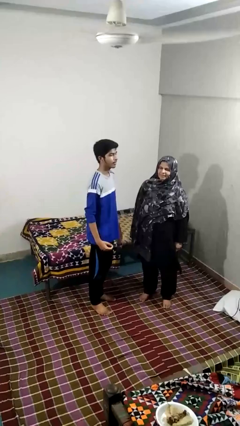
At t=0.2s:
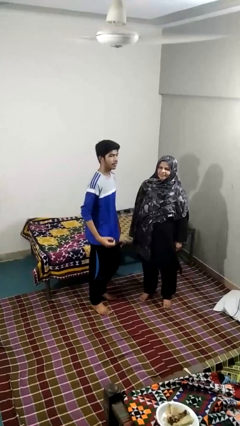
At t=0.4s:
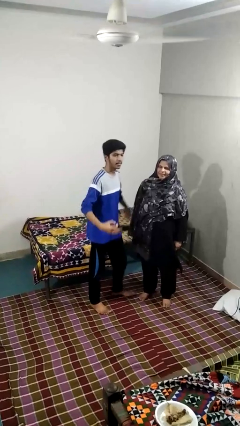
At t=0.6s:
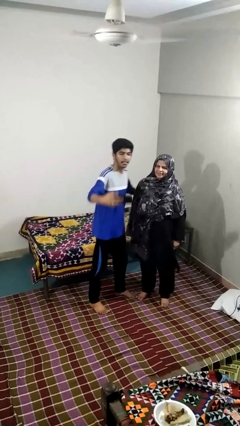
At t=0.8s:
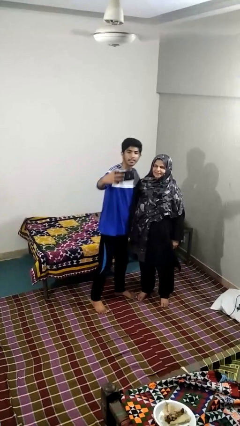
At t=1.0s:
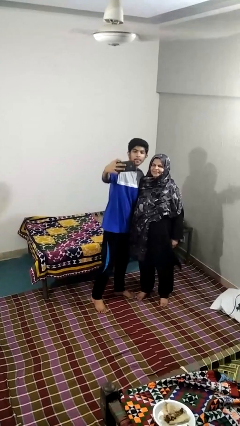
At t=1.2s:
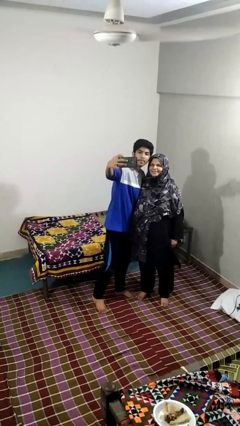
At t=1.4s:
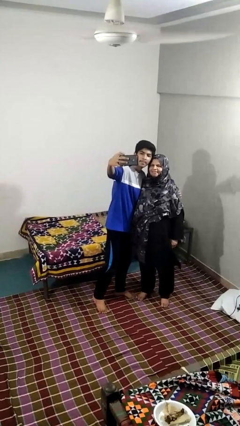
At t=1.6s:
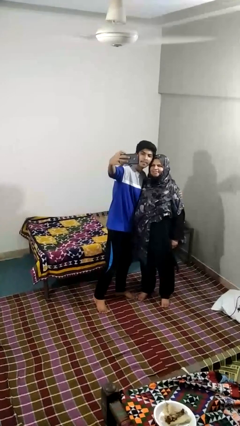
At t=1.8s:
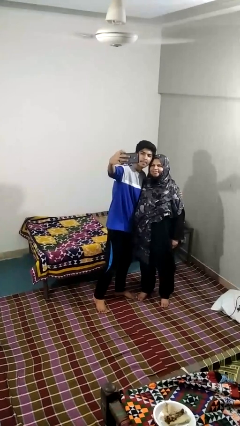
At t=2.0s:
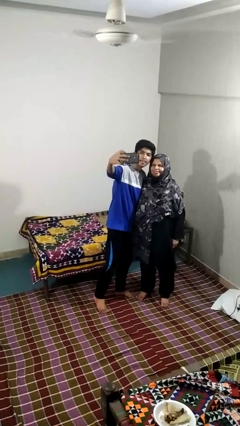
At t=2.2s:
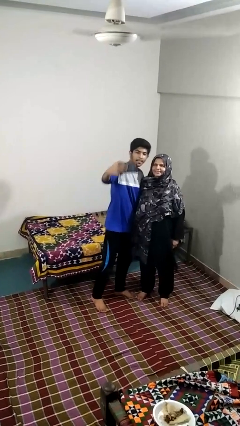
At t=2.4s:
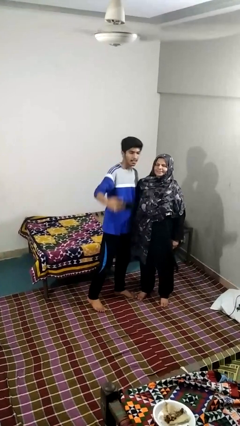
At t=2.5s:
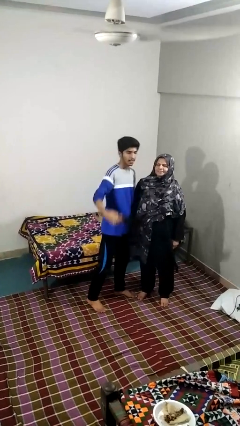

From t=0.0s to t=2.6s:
person takes selfie with person

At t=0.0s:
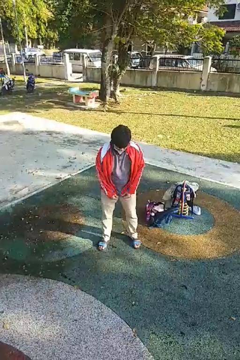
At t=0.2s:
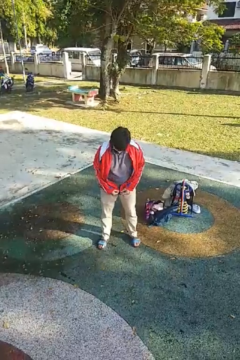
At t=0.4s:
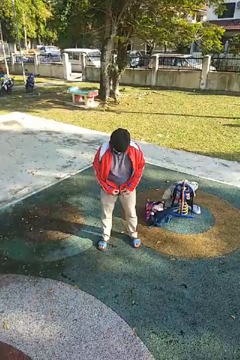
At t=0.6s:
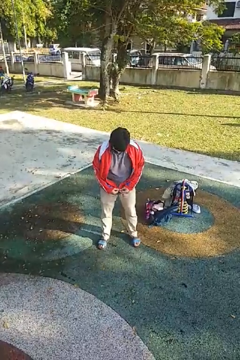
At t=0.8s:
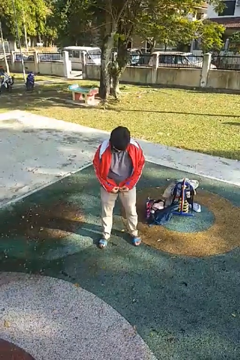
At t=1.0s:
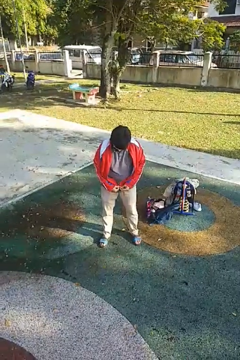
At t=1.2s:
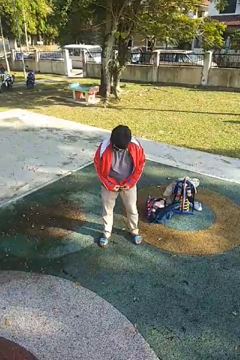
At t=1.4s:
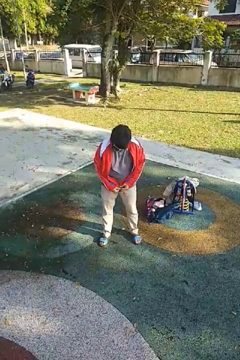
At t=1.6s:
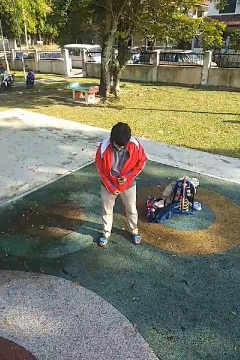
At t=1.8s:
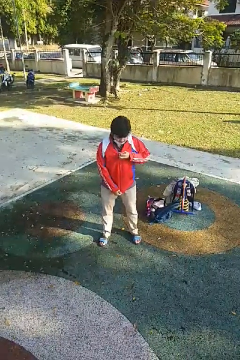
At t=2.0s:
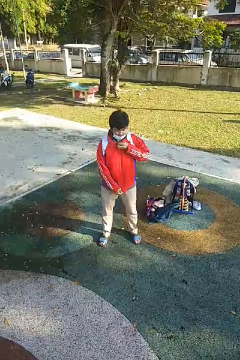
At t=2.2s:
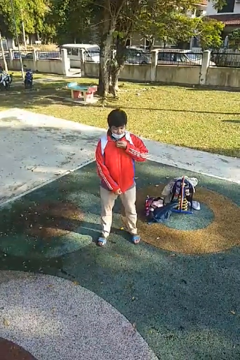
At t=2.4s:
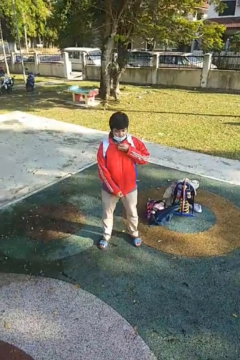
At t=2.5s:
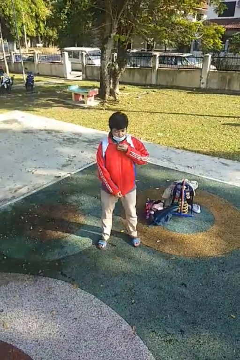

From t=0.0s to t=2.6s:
person zips up jacket

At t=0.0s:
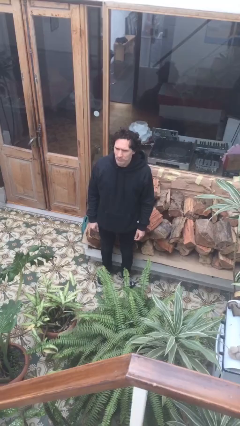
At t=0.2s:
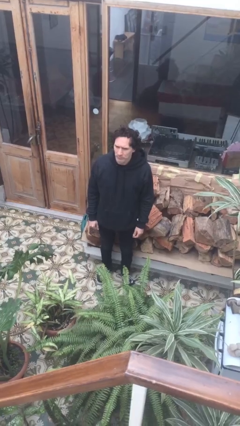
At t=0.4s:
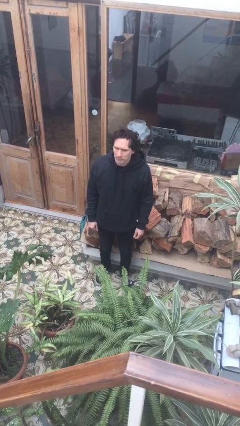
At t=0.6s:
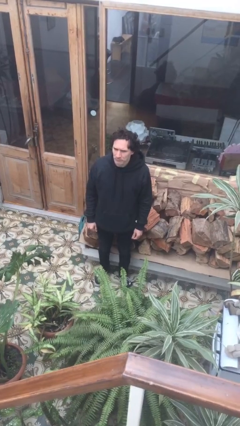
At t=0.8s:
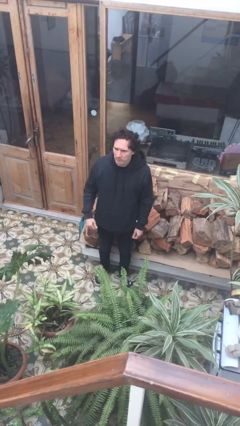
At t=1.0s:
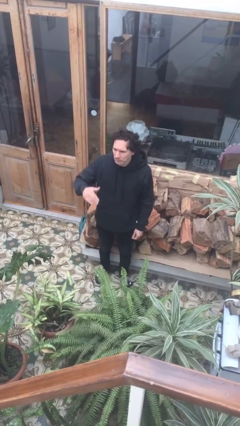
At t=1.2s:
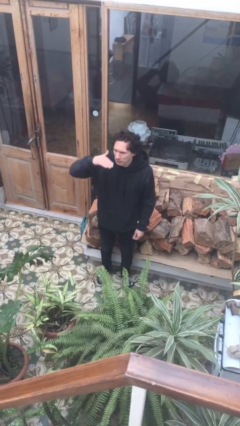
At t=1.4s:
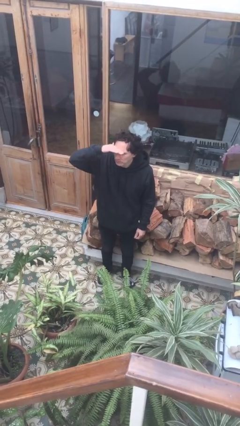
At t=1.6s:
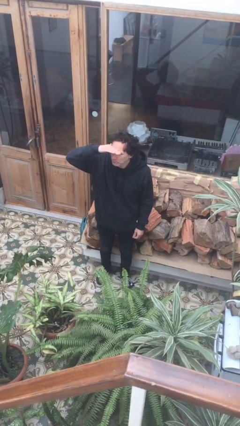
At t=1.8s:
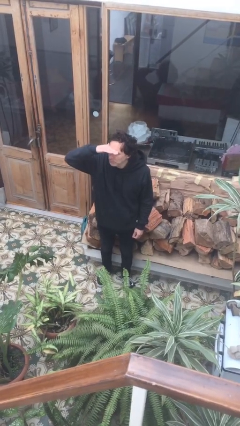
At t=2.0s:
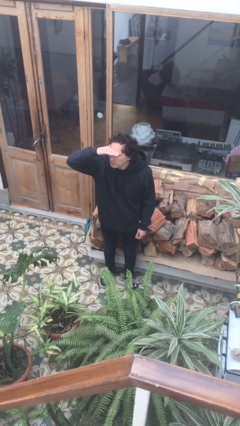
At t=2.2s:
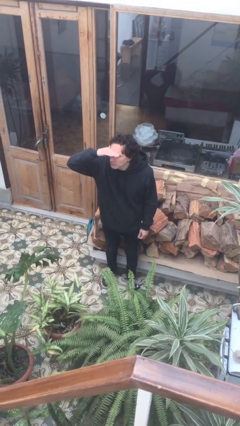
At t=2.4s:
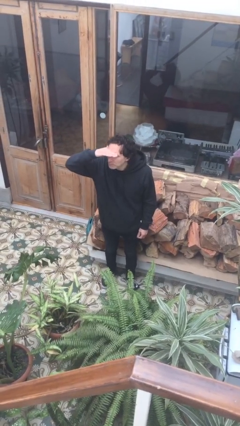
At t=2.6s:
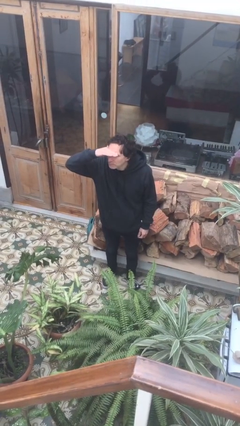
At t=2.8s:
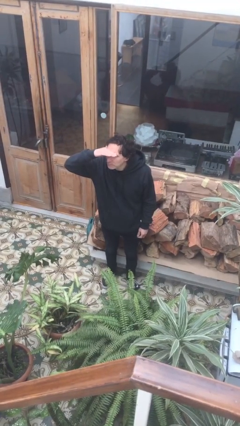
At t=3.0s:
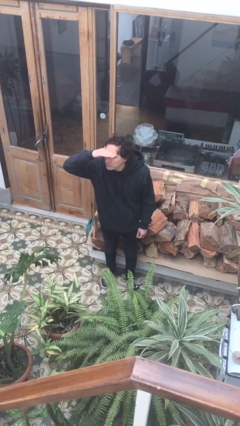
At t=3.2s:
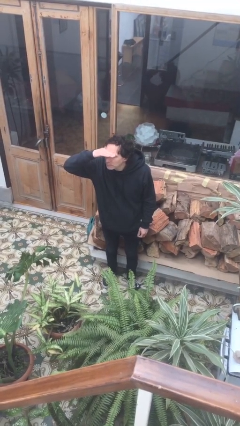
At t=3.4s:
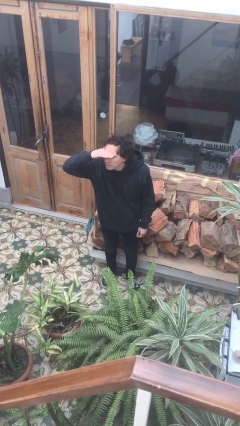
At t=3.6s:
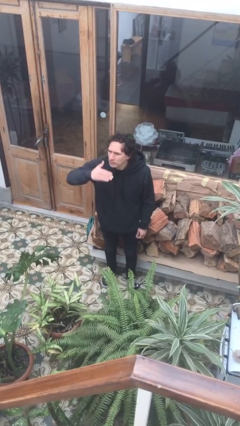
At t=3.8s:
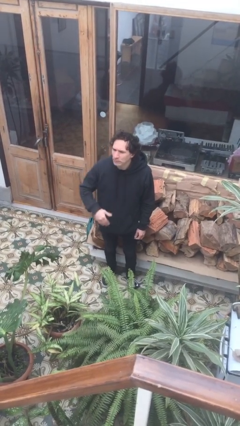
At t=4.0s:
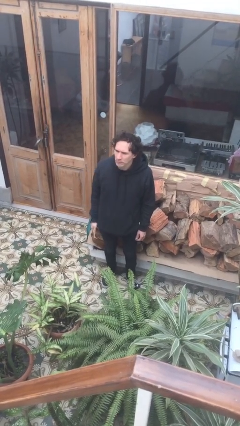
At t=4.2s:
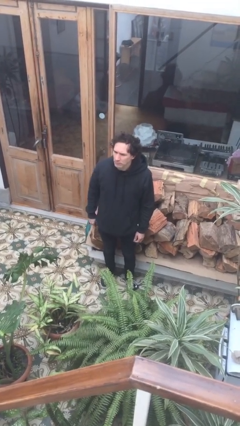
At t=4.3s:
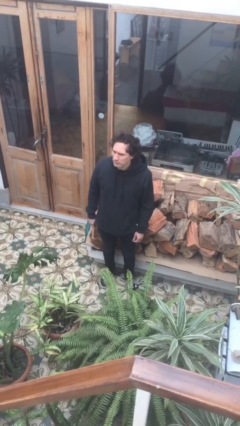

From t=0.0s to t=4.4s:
person shades eyes

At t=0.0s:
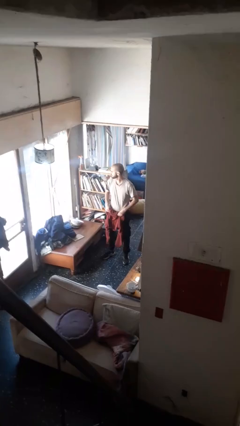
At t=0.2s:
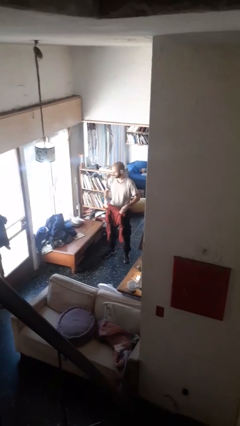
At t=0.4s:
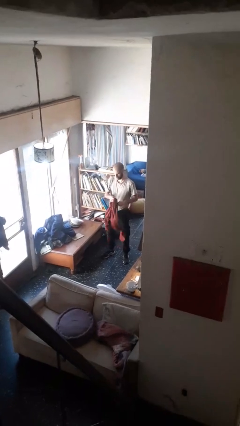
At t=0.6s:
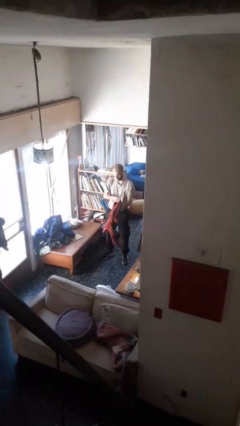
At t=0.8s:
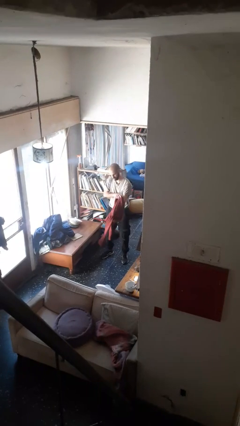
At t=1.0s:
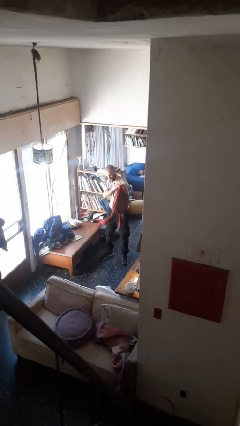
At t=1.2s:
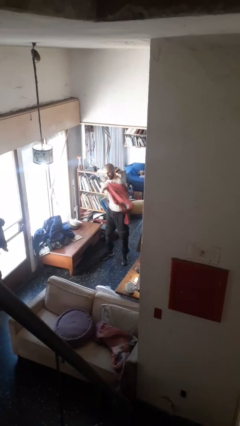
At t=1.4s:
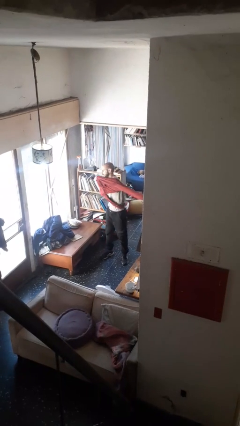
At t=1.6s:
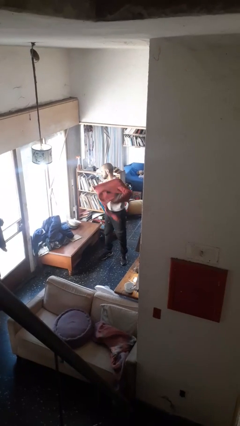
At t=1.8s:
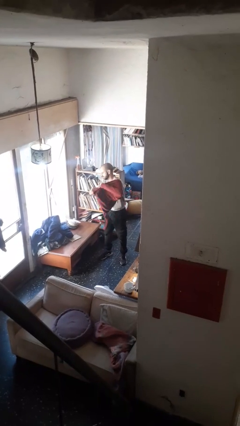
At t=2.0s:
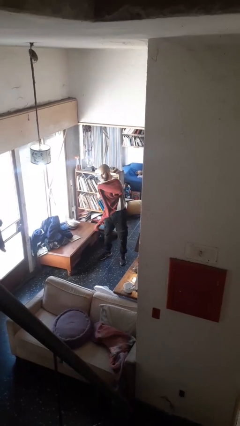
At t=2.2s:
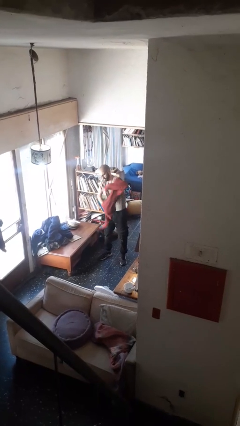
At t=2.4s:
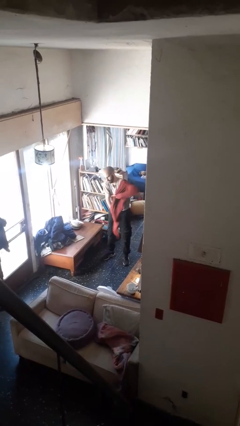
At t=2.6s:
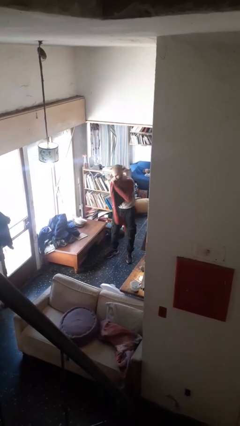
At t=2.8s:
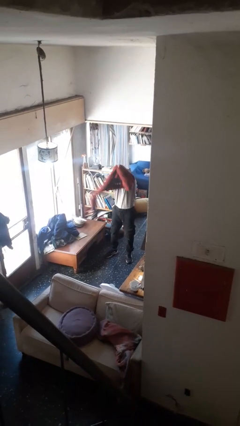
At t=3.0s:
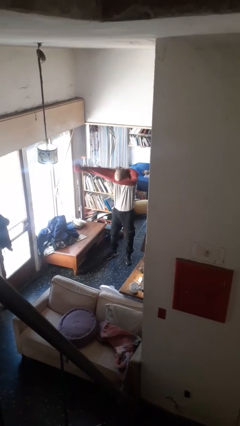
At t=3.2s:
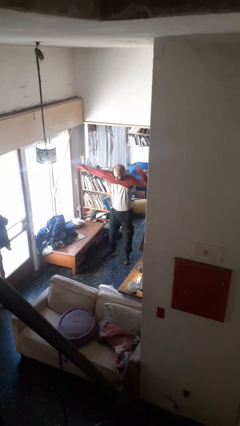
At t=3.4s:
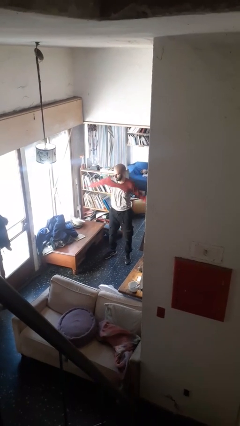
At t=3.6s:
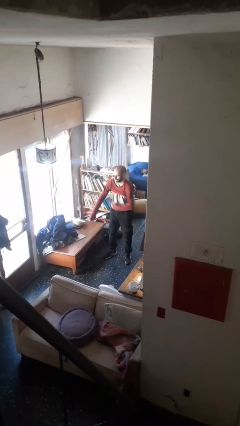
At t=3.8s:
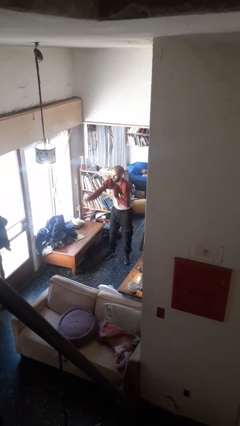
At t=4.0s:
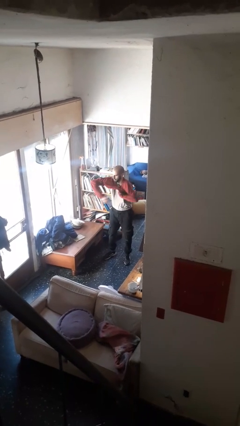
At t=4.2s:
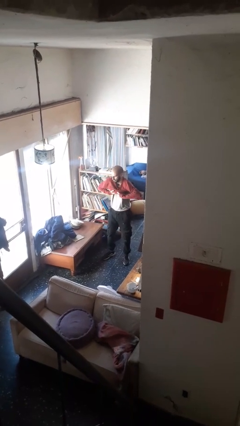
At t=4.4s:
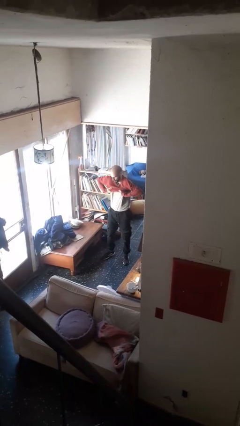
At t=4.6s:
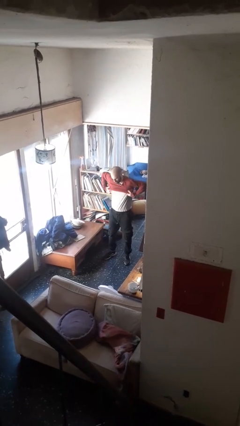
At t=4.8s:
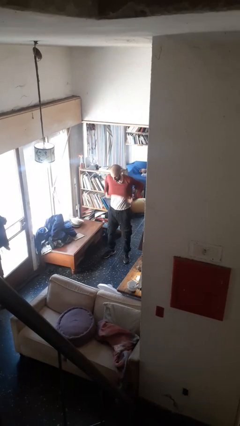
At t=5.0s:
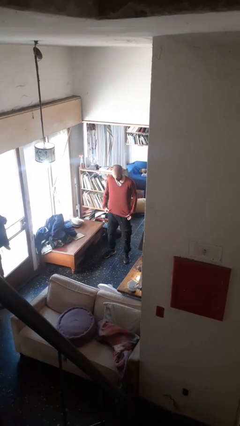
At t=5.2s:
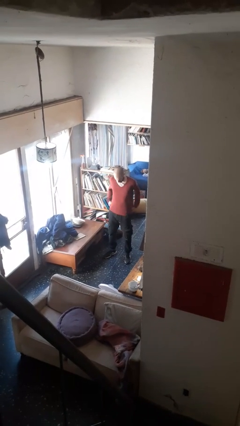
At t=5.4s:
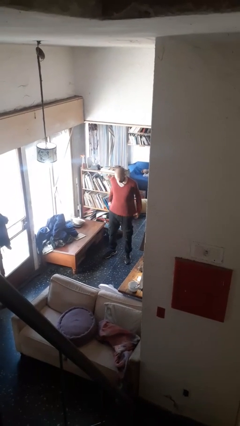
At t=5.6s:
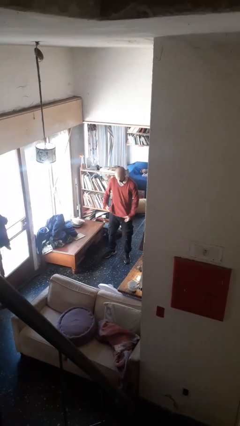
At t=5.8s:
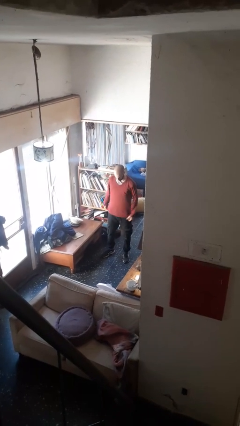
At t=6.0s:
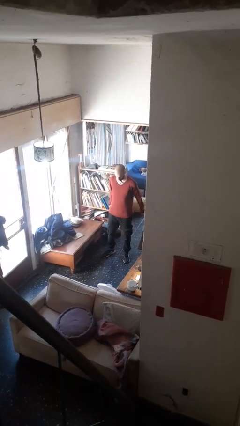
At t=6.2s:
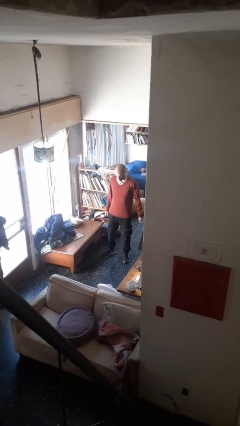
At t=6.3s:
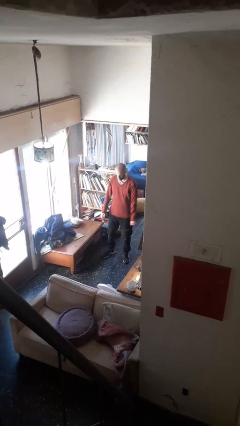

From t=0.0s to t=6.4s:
person puts on shirt

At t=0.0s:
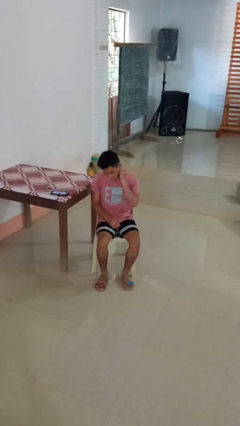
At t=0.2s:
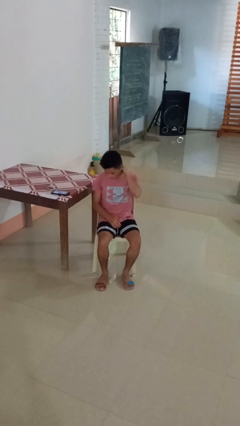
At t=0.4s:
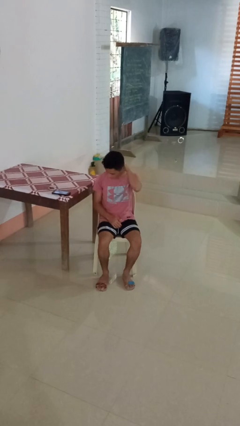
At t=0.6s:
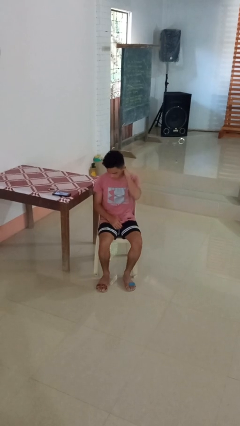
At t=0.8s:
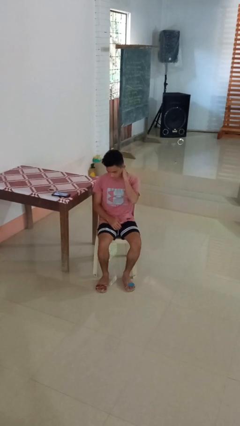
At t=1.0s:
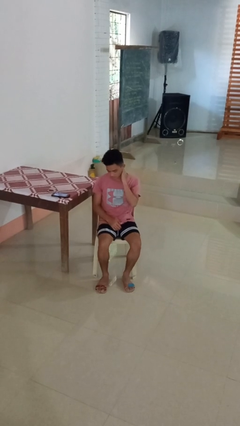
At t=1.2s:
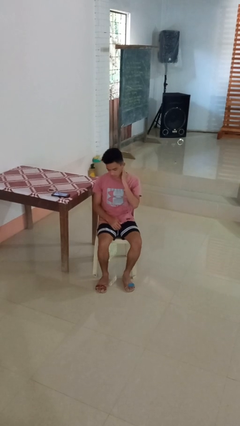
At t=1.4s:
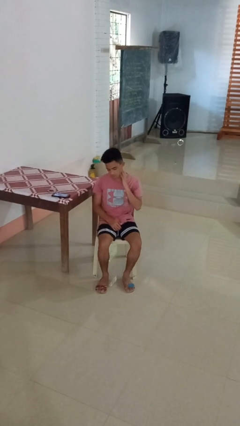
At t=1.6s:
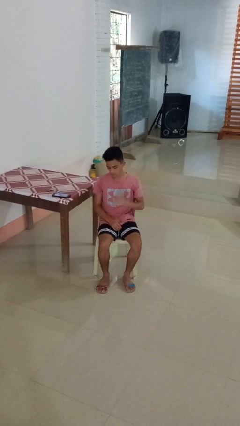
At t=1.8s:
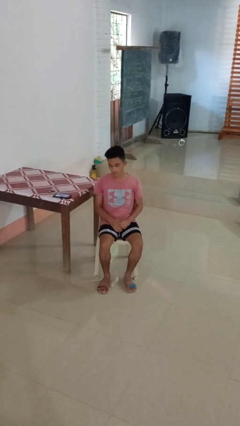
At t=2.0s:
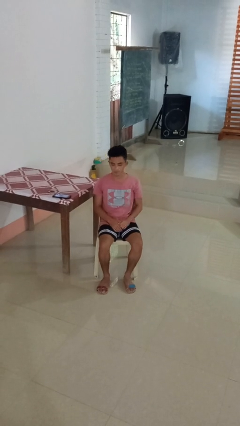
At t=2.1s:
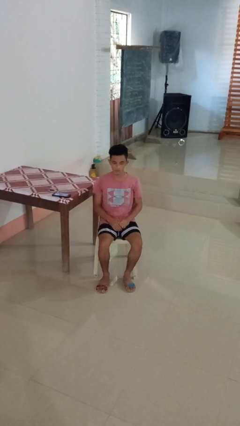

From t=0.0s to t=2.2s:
person rubs neck
